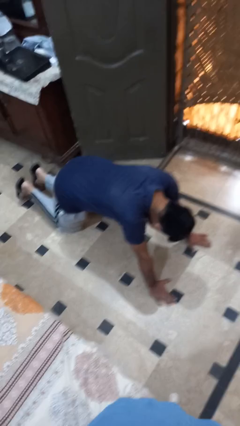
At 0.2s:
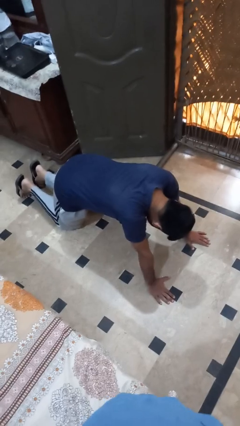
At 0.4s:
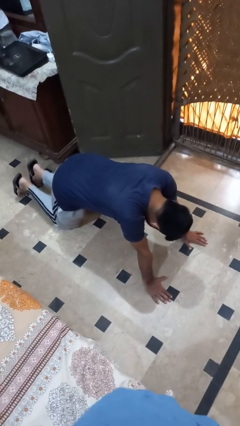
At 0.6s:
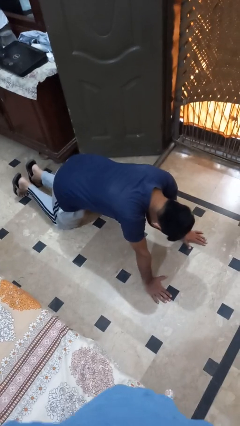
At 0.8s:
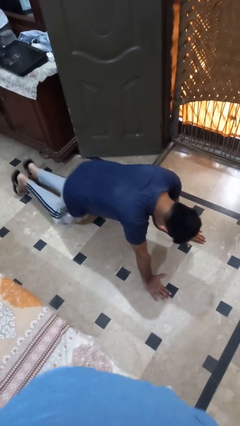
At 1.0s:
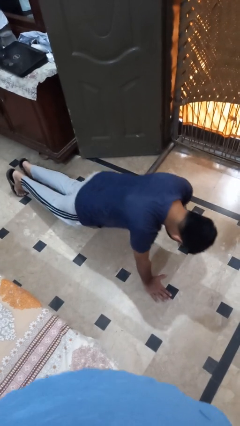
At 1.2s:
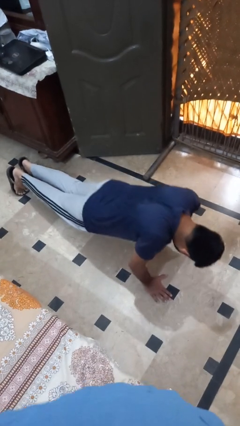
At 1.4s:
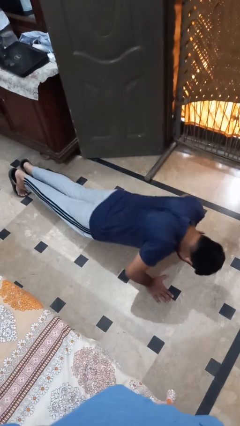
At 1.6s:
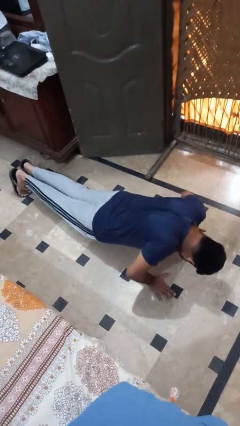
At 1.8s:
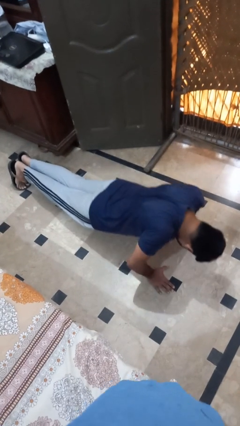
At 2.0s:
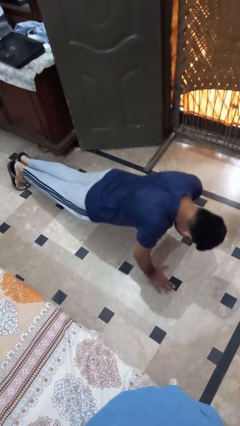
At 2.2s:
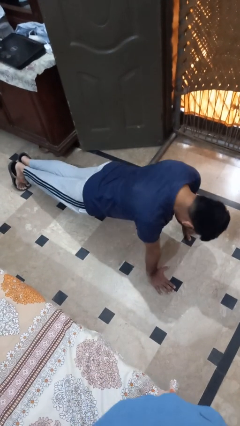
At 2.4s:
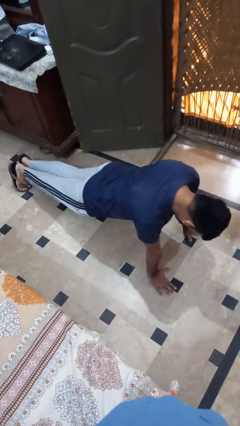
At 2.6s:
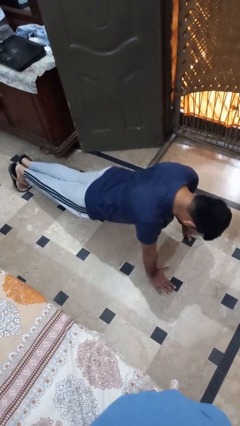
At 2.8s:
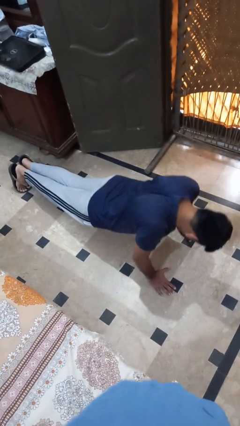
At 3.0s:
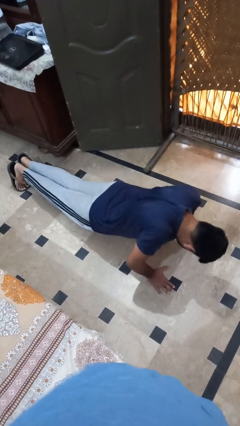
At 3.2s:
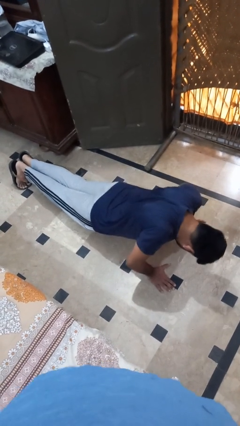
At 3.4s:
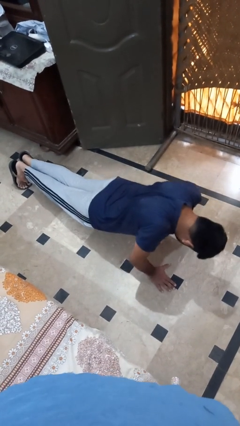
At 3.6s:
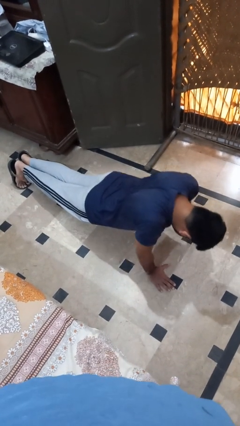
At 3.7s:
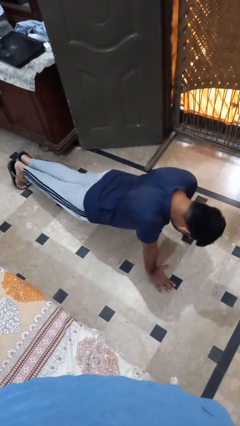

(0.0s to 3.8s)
person exercises with pushup

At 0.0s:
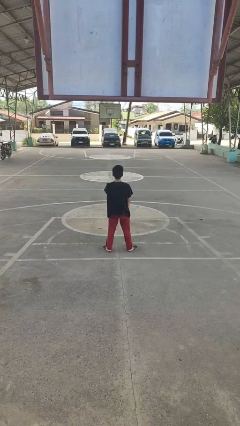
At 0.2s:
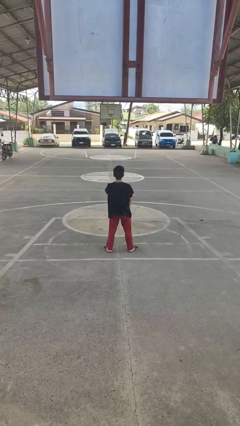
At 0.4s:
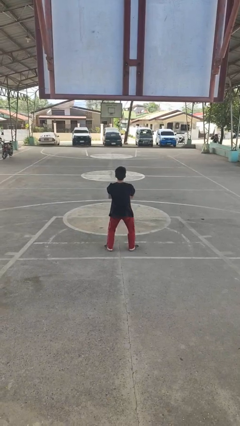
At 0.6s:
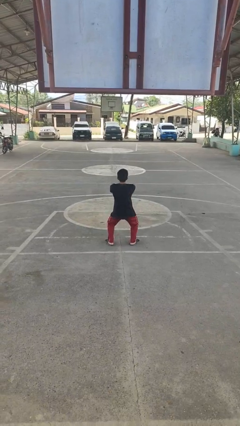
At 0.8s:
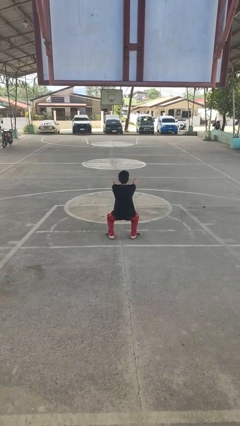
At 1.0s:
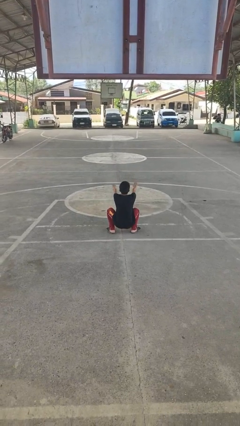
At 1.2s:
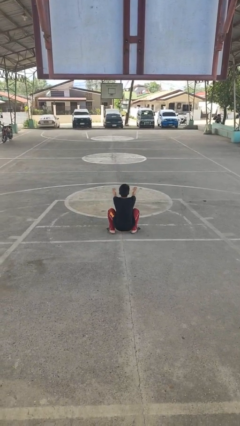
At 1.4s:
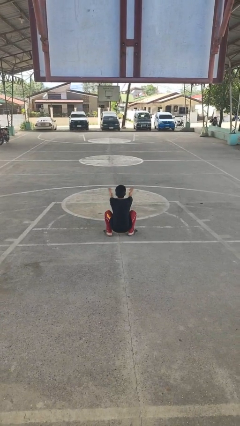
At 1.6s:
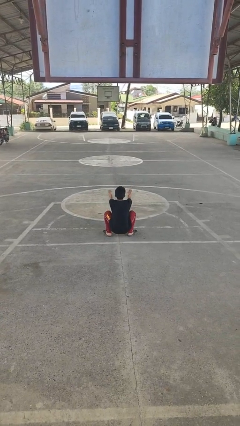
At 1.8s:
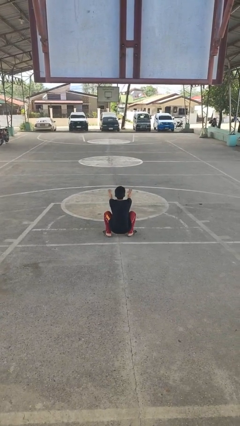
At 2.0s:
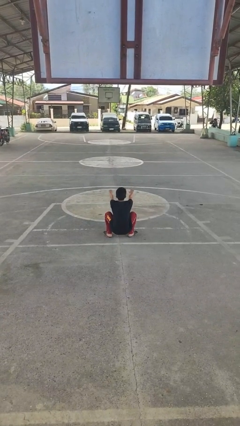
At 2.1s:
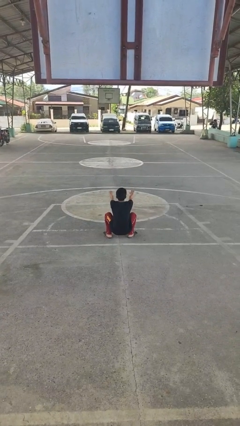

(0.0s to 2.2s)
person squats

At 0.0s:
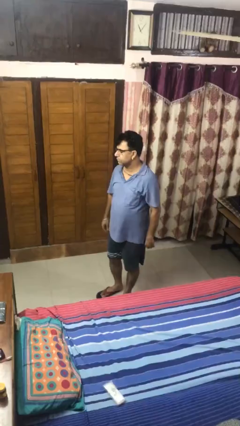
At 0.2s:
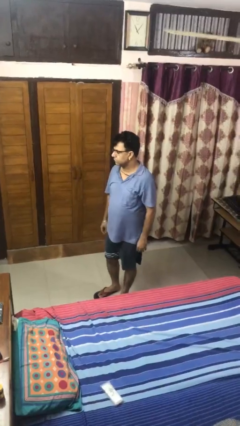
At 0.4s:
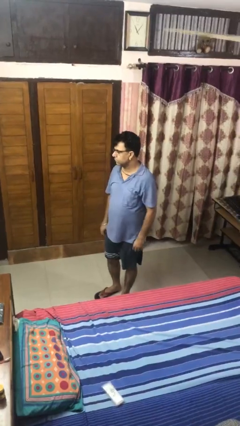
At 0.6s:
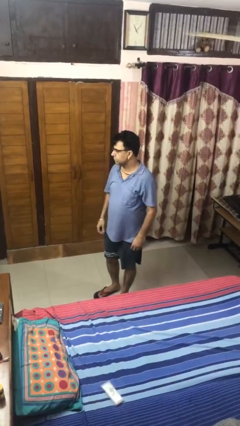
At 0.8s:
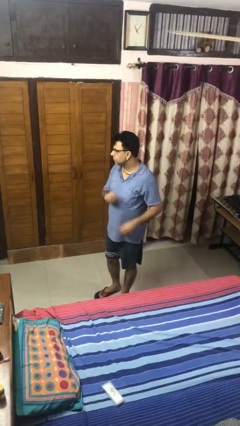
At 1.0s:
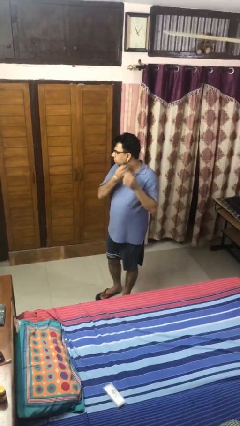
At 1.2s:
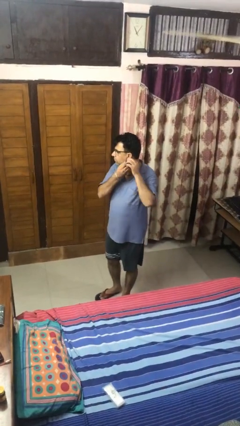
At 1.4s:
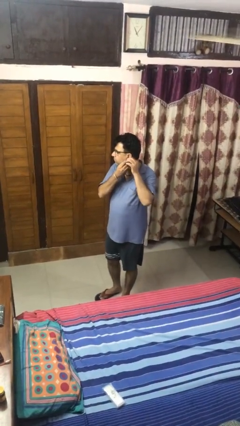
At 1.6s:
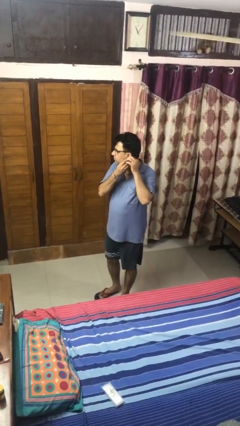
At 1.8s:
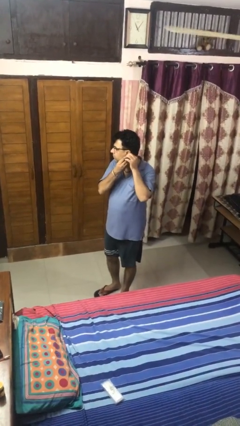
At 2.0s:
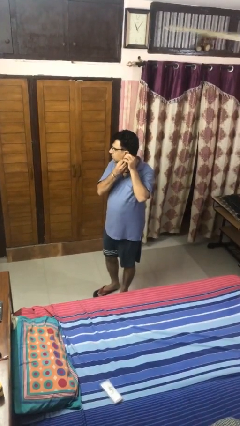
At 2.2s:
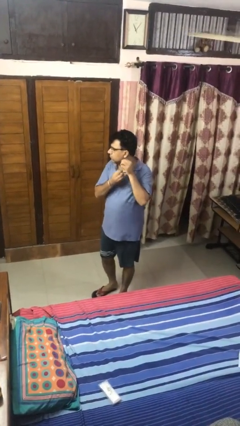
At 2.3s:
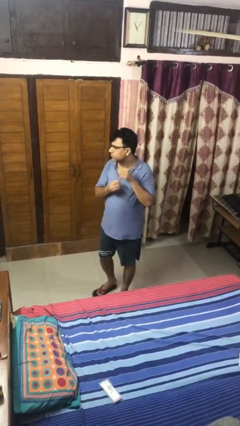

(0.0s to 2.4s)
person takes off earrings

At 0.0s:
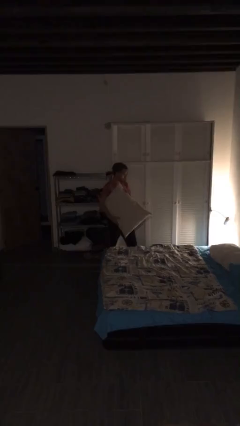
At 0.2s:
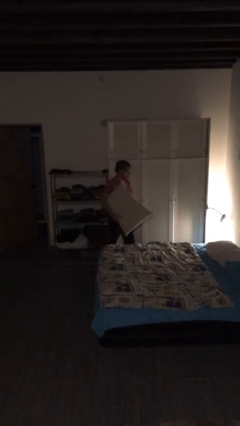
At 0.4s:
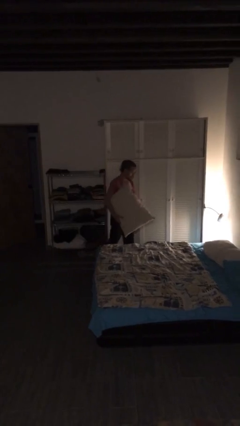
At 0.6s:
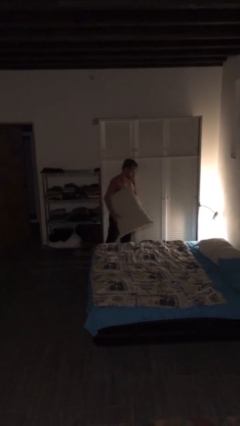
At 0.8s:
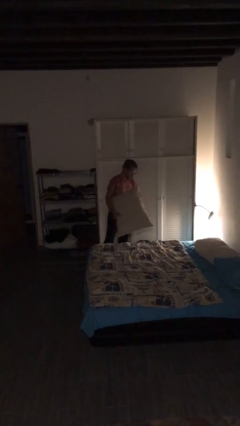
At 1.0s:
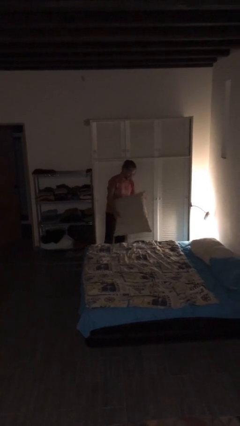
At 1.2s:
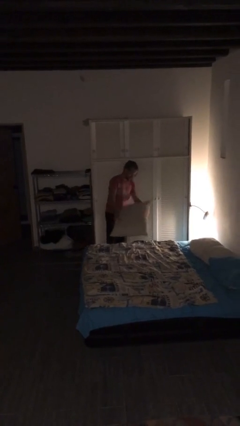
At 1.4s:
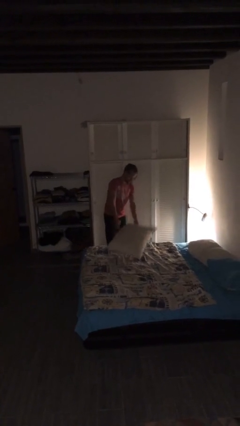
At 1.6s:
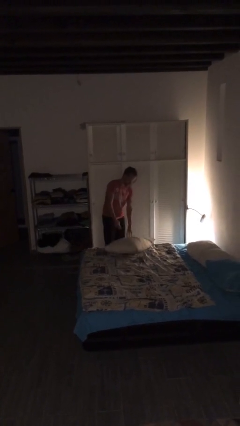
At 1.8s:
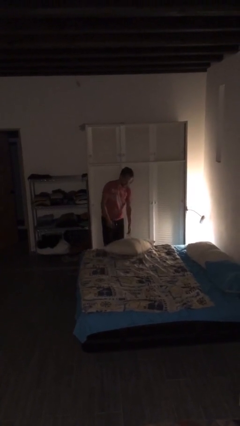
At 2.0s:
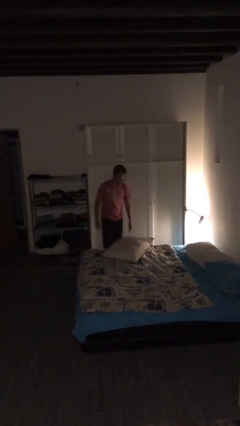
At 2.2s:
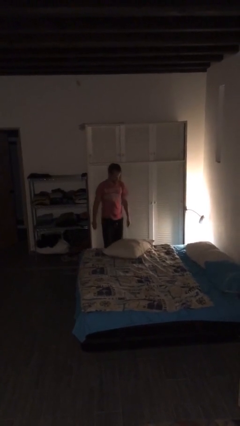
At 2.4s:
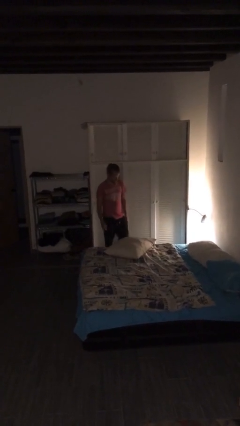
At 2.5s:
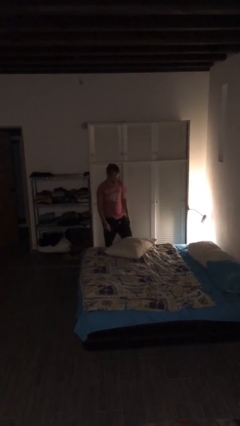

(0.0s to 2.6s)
person puts down object on bed

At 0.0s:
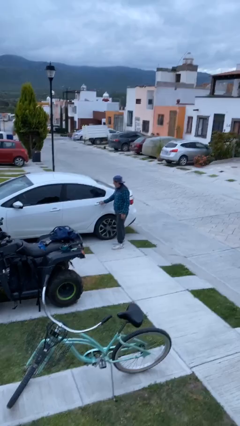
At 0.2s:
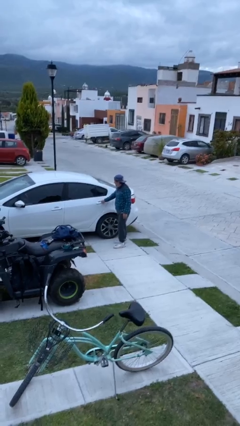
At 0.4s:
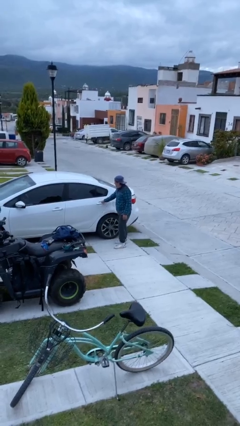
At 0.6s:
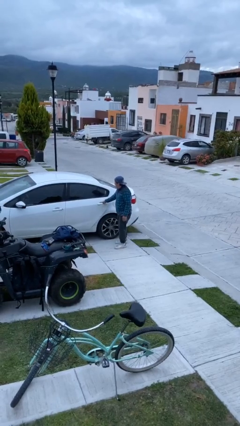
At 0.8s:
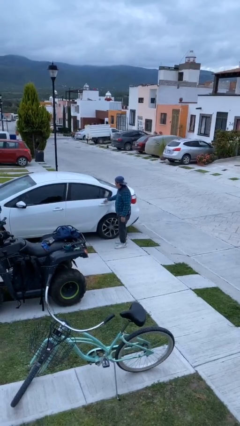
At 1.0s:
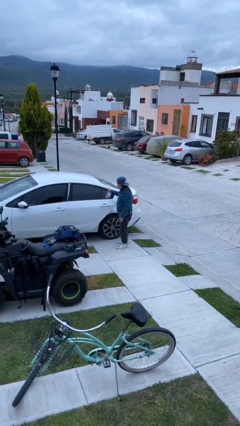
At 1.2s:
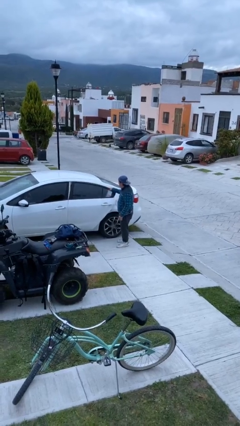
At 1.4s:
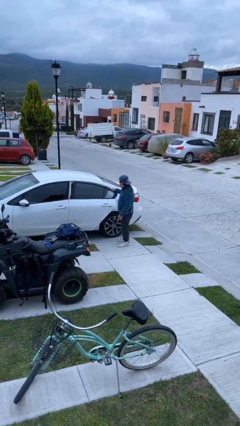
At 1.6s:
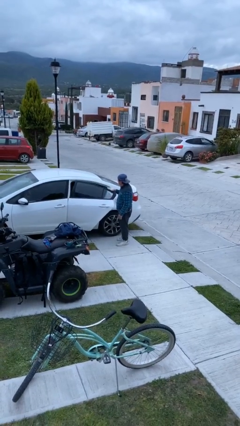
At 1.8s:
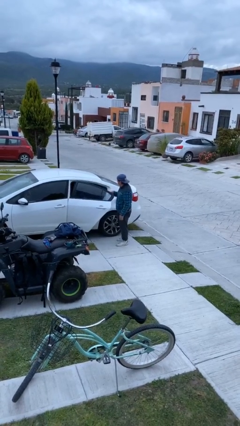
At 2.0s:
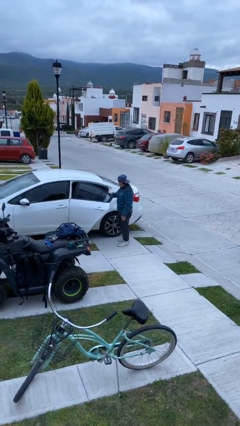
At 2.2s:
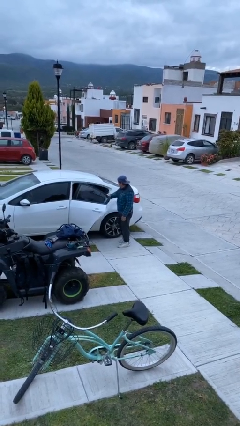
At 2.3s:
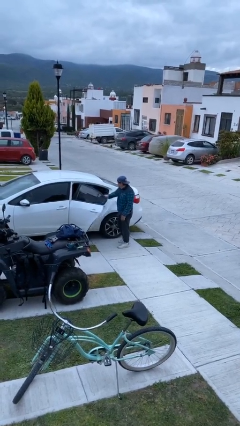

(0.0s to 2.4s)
person opens car door

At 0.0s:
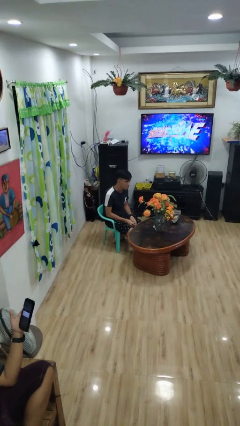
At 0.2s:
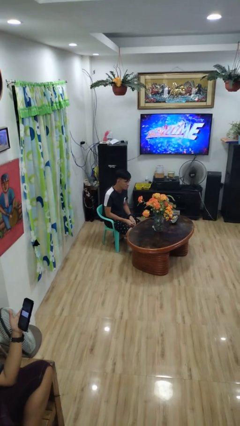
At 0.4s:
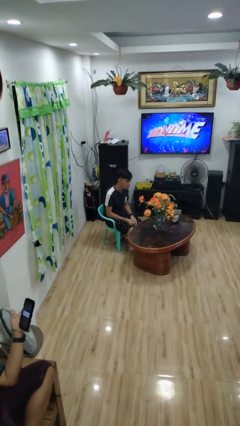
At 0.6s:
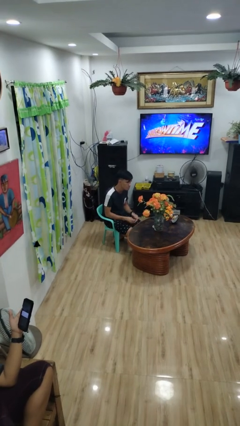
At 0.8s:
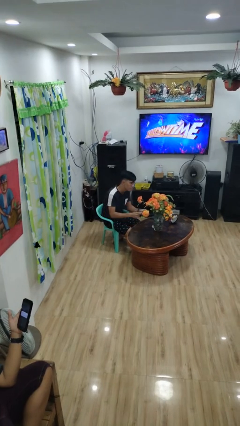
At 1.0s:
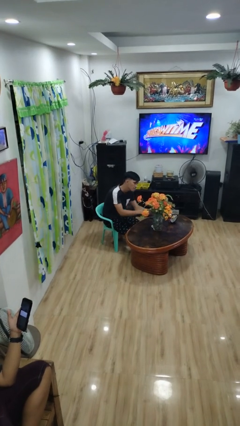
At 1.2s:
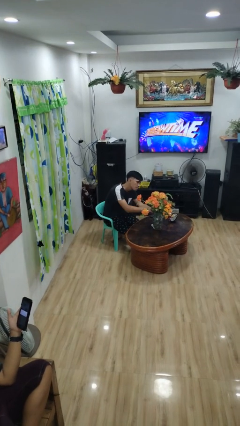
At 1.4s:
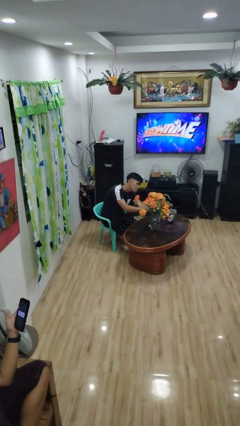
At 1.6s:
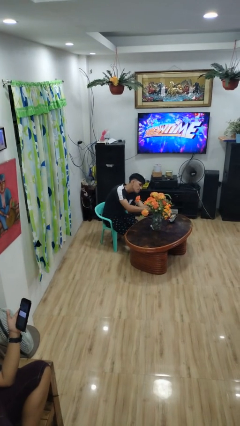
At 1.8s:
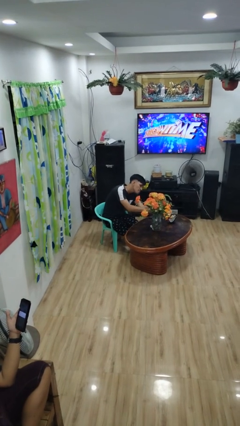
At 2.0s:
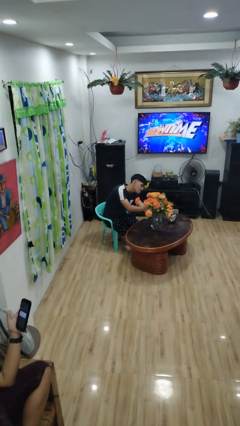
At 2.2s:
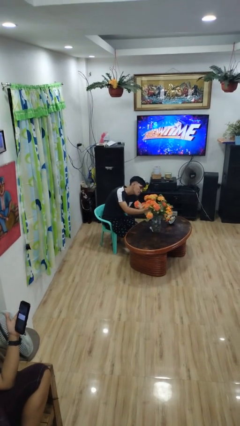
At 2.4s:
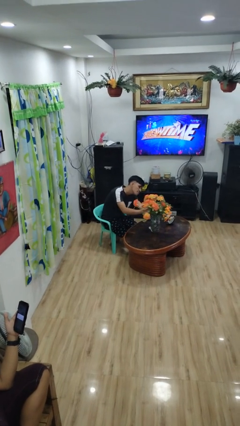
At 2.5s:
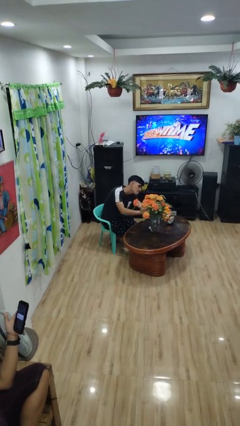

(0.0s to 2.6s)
person arranges flowers in vase

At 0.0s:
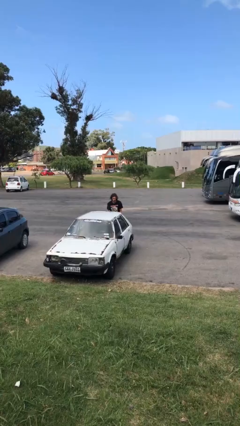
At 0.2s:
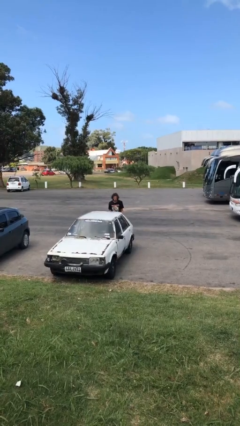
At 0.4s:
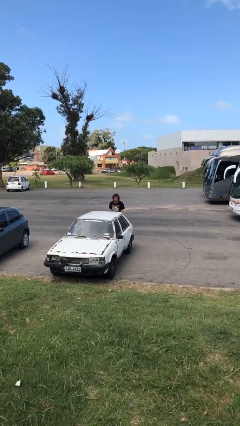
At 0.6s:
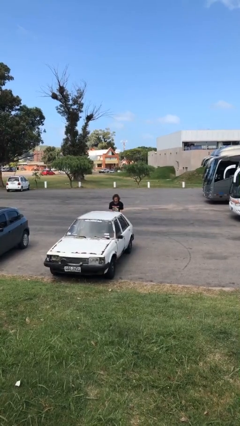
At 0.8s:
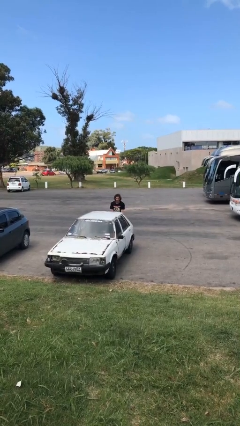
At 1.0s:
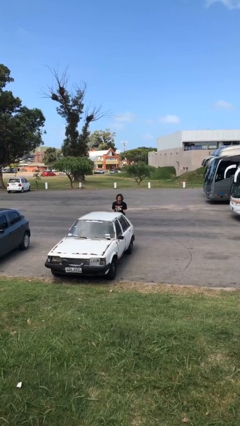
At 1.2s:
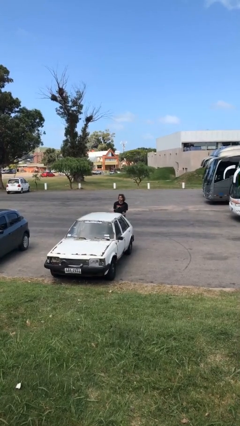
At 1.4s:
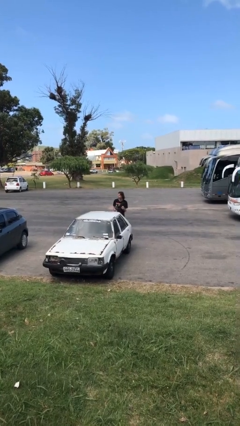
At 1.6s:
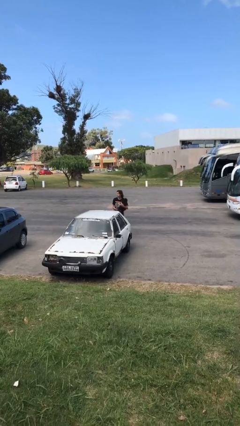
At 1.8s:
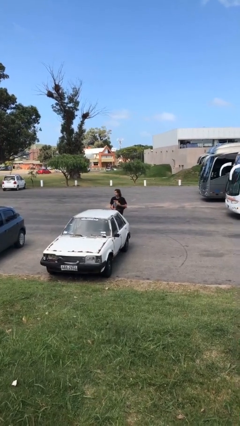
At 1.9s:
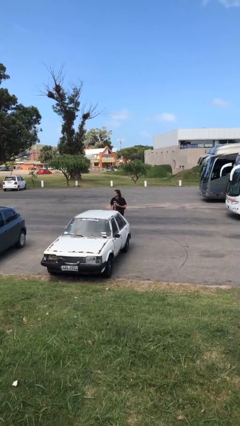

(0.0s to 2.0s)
person unloads car
